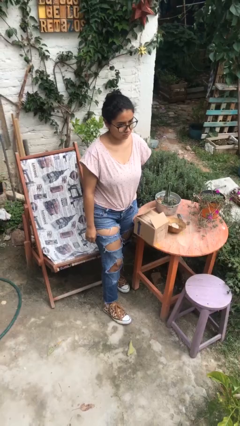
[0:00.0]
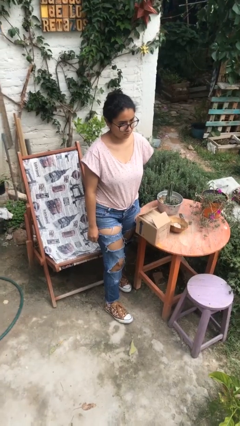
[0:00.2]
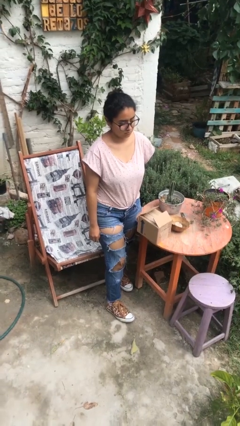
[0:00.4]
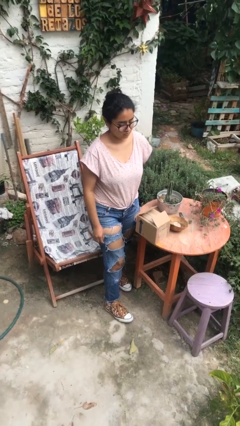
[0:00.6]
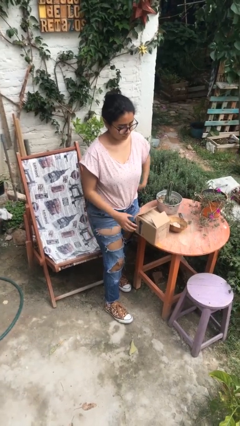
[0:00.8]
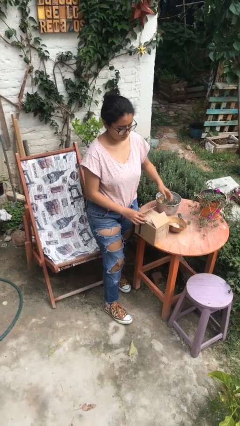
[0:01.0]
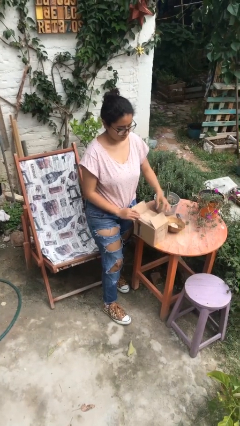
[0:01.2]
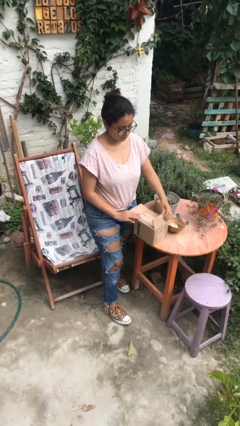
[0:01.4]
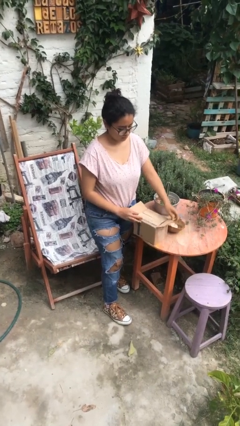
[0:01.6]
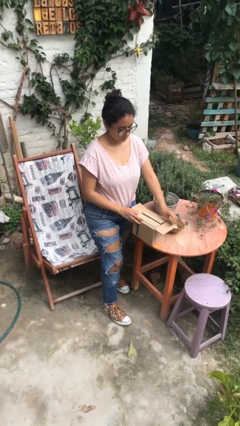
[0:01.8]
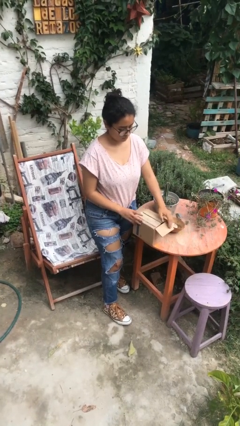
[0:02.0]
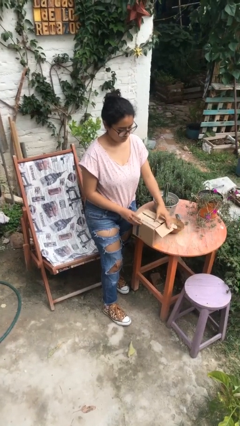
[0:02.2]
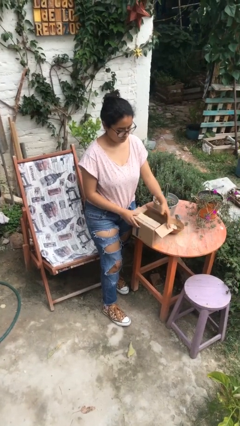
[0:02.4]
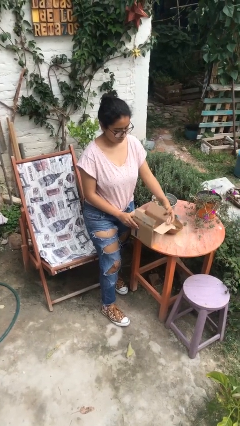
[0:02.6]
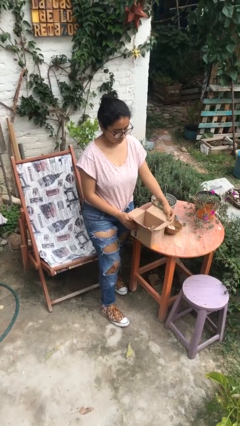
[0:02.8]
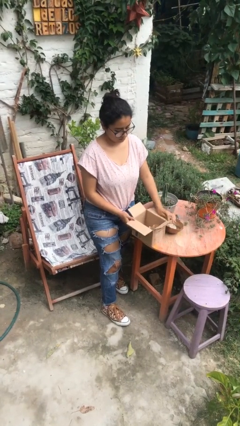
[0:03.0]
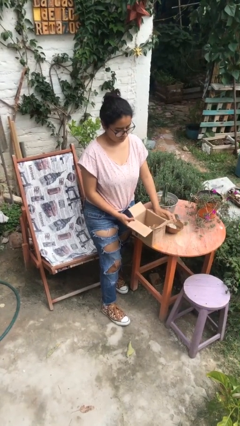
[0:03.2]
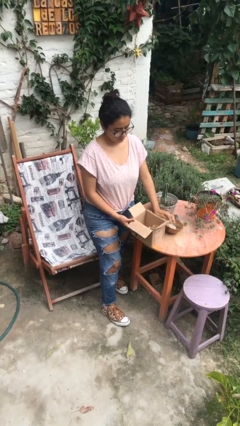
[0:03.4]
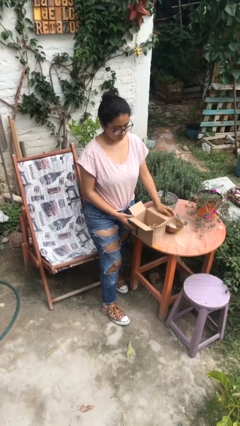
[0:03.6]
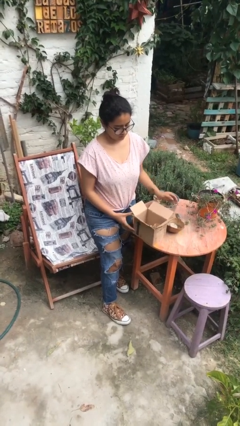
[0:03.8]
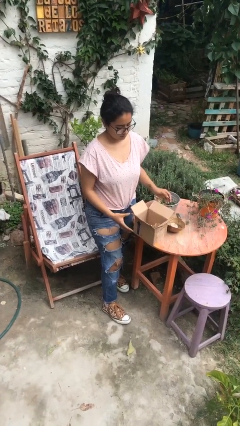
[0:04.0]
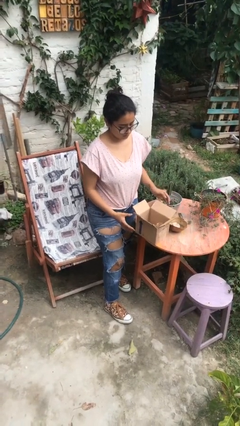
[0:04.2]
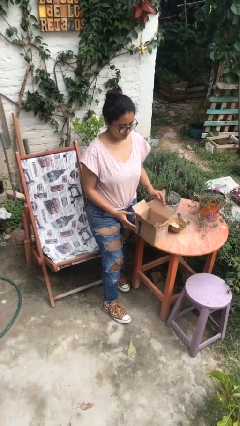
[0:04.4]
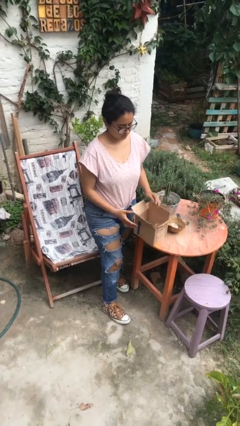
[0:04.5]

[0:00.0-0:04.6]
person opens box

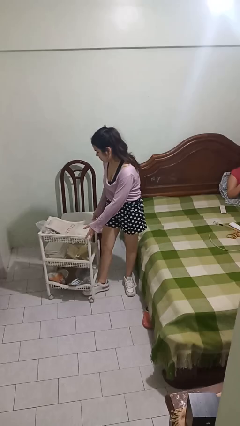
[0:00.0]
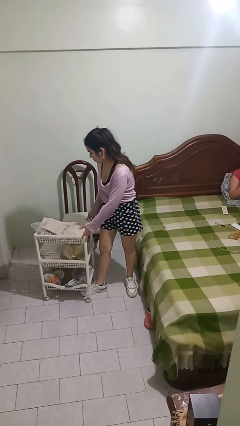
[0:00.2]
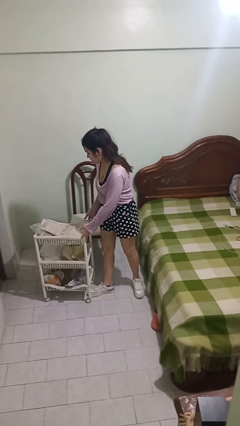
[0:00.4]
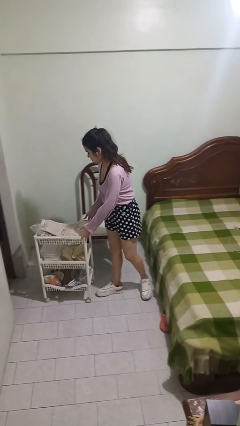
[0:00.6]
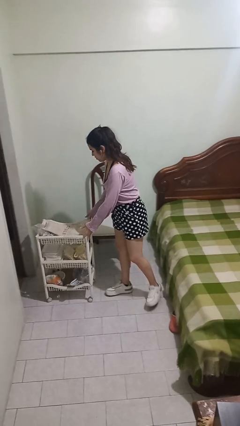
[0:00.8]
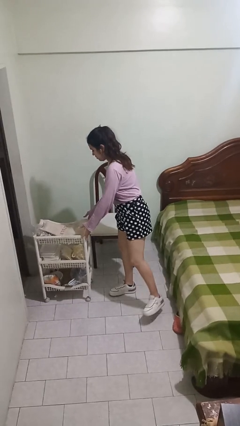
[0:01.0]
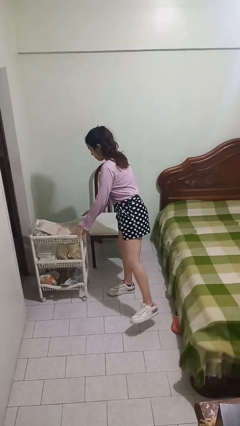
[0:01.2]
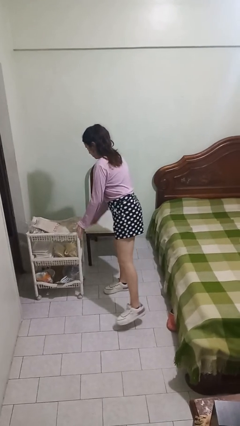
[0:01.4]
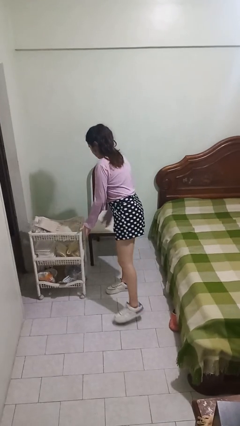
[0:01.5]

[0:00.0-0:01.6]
person pushes wheeled cart

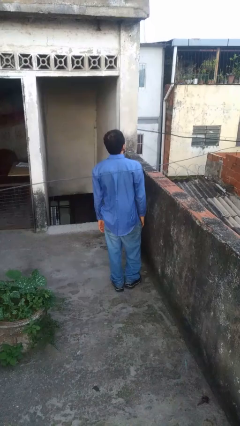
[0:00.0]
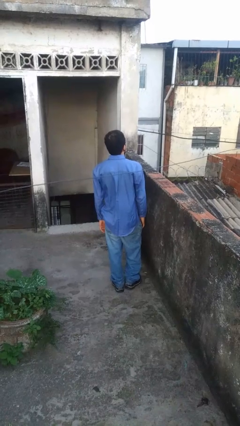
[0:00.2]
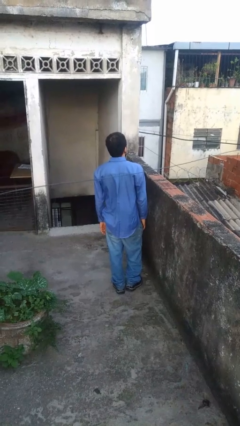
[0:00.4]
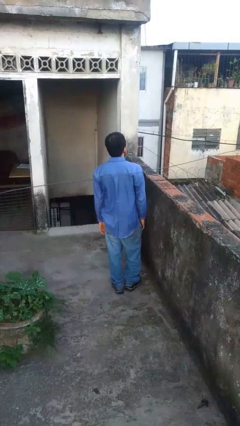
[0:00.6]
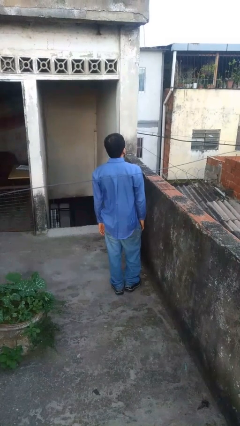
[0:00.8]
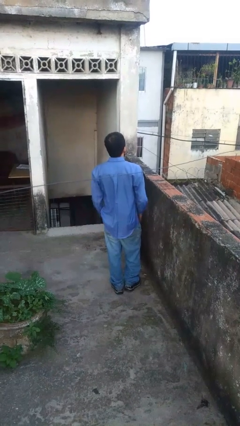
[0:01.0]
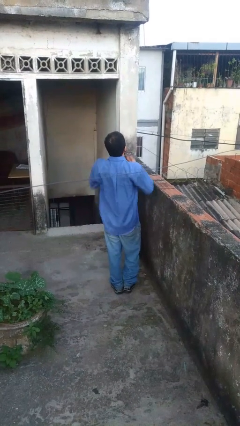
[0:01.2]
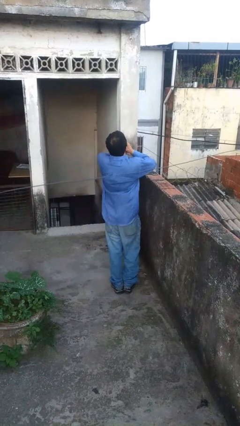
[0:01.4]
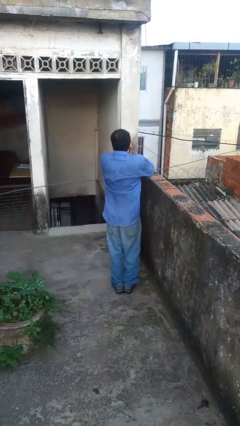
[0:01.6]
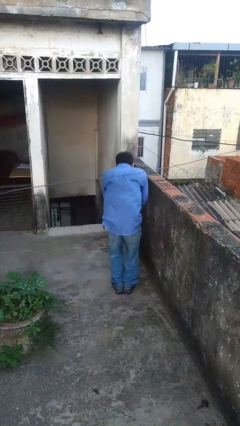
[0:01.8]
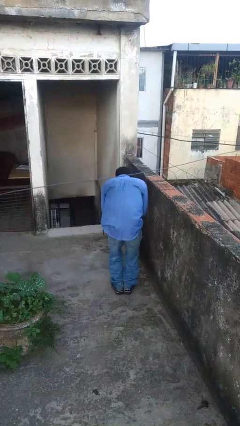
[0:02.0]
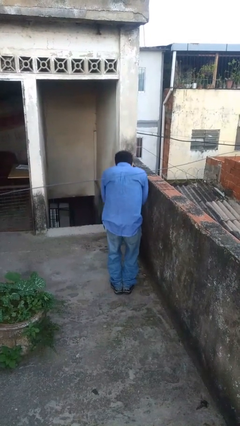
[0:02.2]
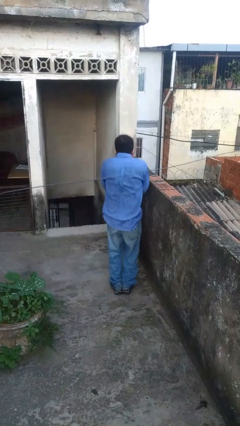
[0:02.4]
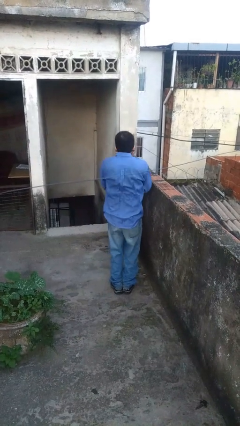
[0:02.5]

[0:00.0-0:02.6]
person sneezes into hand

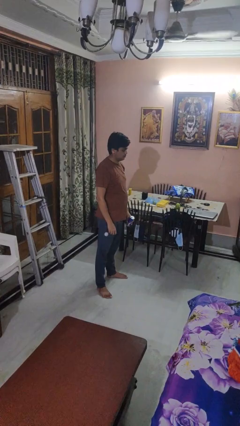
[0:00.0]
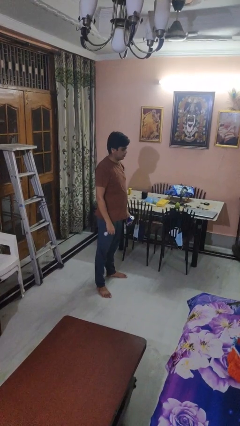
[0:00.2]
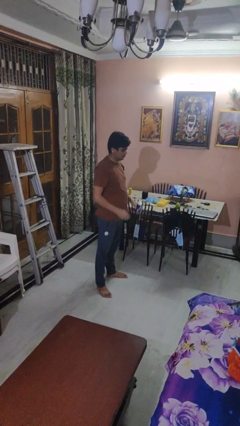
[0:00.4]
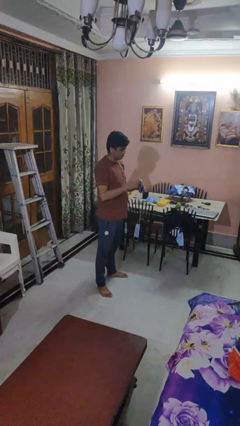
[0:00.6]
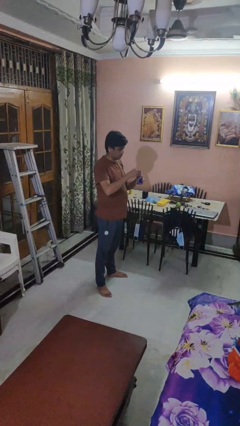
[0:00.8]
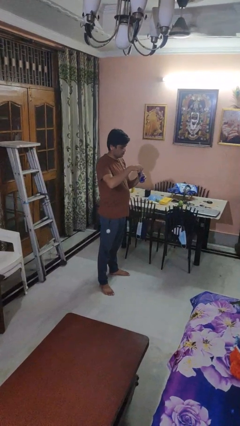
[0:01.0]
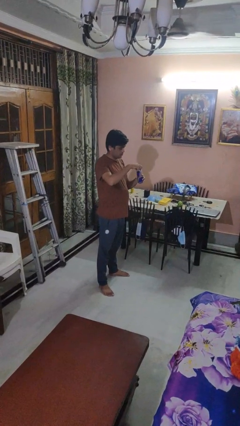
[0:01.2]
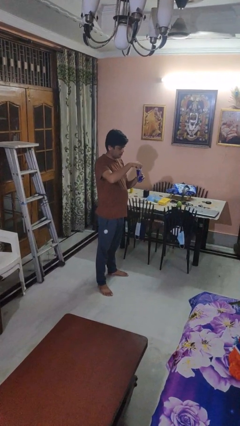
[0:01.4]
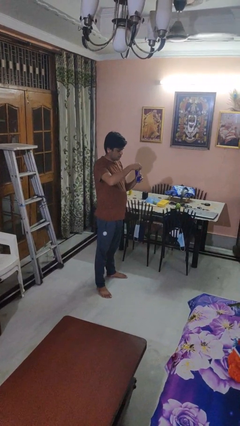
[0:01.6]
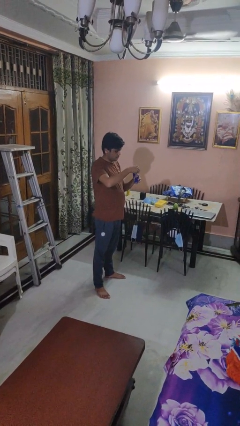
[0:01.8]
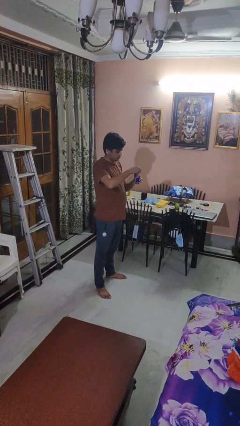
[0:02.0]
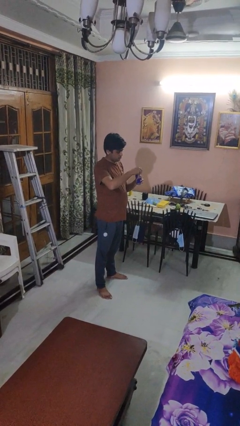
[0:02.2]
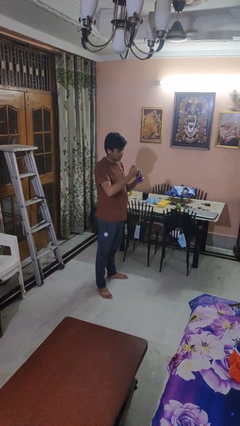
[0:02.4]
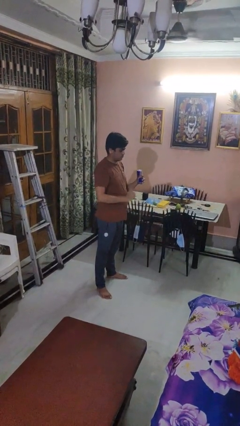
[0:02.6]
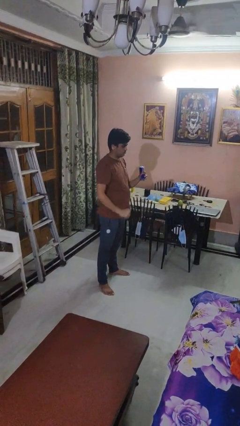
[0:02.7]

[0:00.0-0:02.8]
person opens beverage can

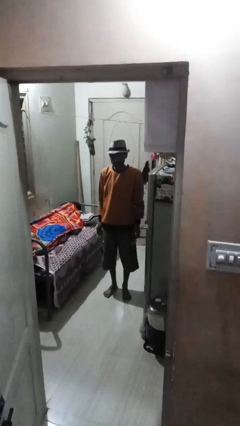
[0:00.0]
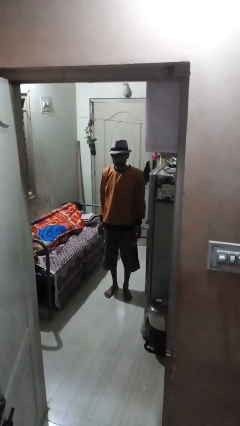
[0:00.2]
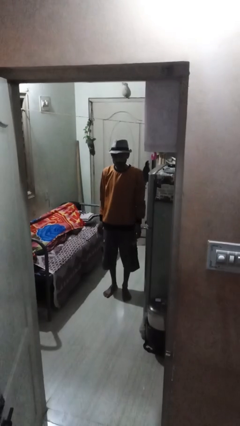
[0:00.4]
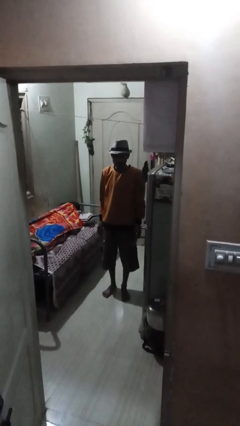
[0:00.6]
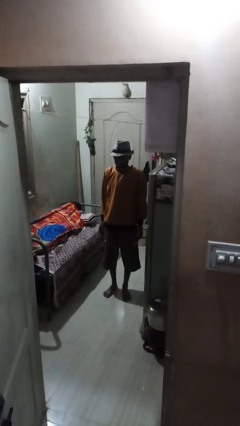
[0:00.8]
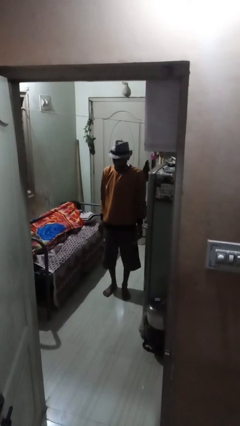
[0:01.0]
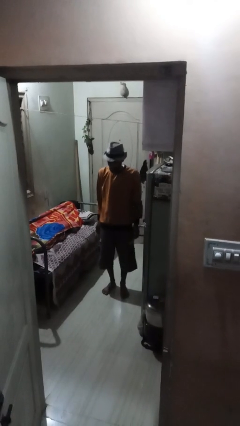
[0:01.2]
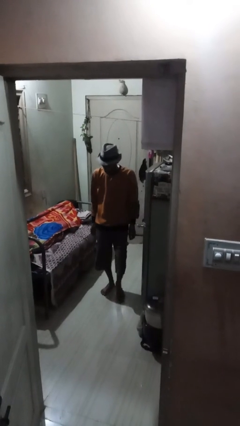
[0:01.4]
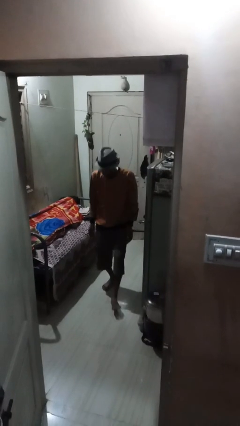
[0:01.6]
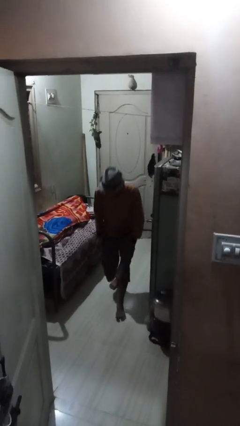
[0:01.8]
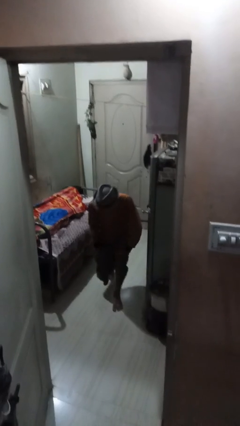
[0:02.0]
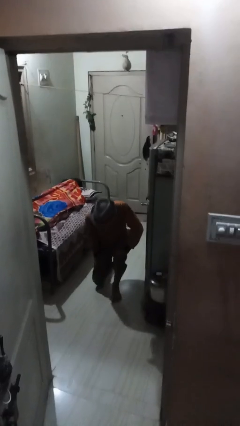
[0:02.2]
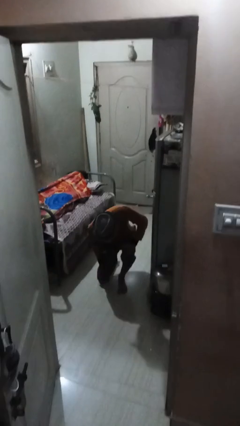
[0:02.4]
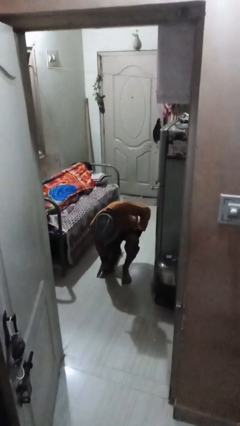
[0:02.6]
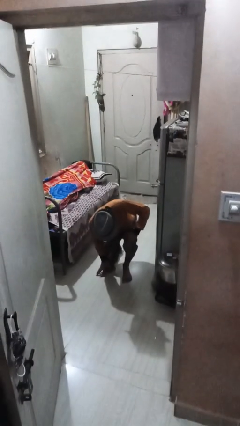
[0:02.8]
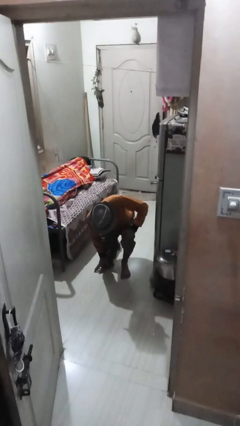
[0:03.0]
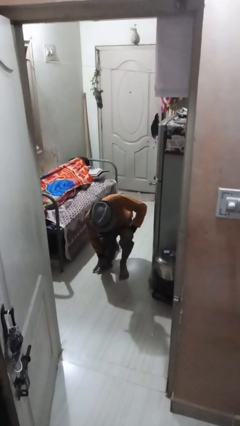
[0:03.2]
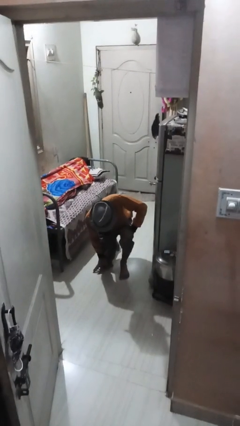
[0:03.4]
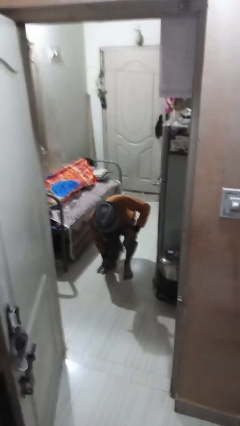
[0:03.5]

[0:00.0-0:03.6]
person kneels

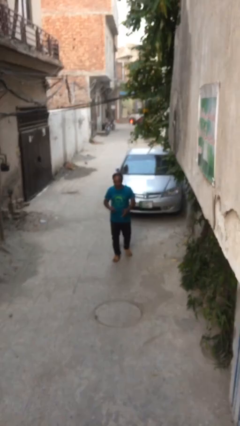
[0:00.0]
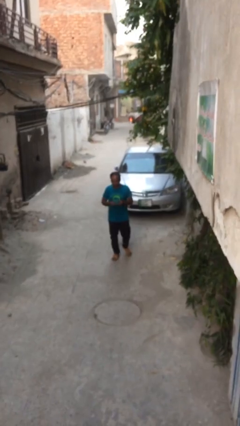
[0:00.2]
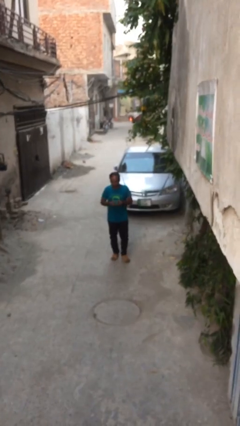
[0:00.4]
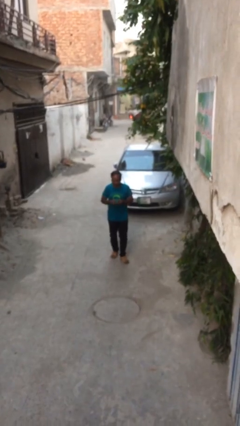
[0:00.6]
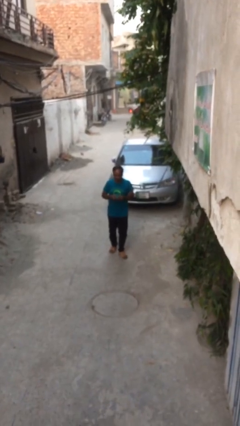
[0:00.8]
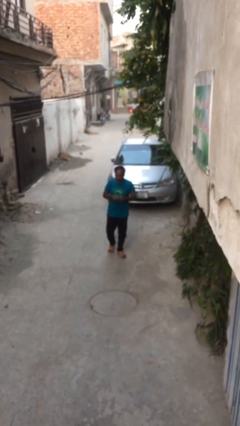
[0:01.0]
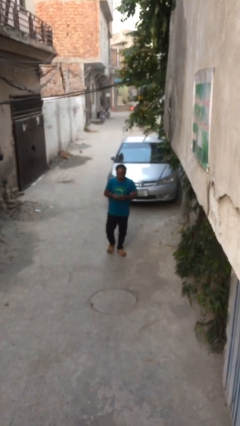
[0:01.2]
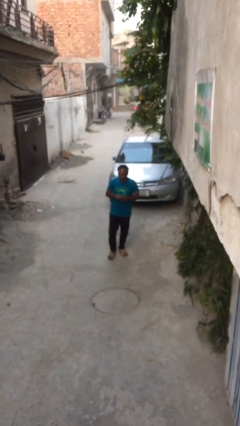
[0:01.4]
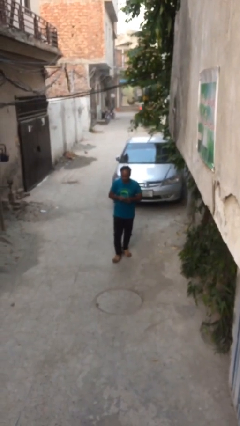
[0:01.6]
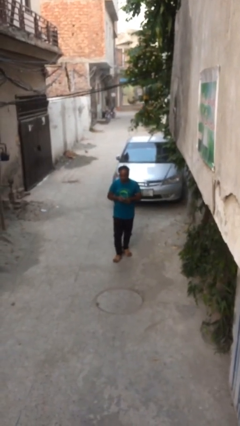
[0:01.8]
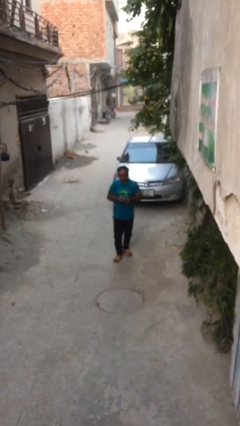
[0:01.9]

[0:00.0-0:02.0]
person texts on phone

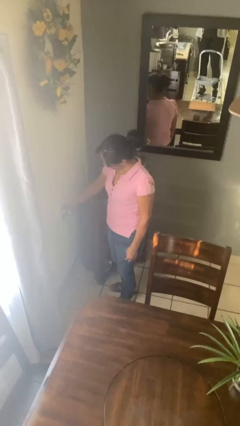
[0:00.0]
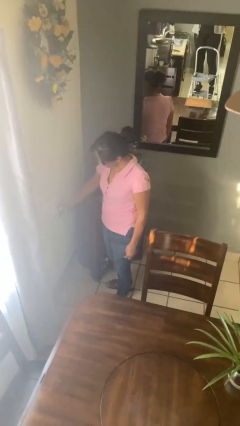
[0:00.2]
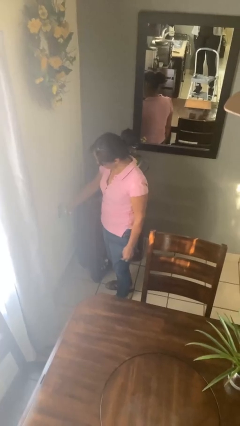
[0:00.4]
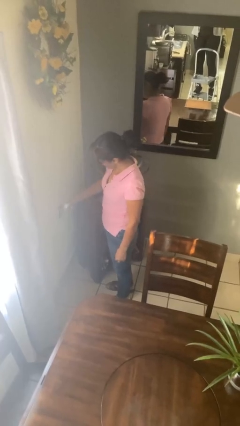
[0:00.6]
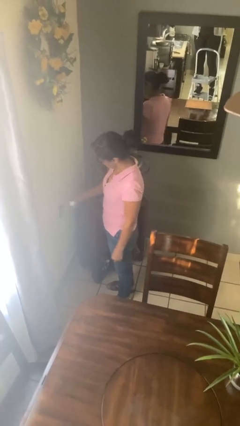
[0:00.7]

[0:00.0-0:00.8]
person unplugs from electrical socket
